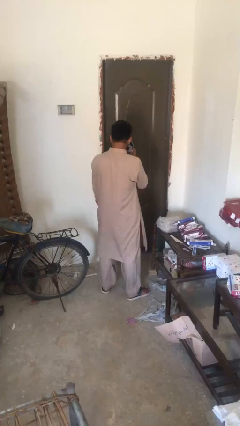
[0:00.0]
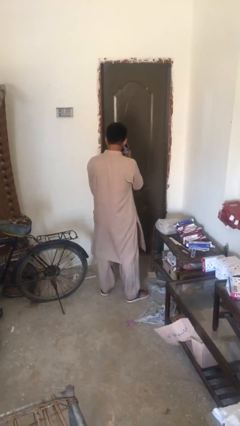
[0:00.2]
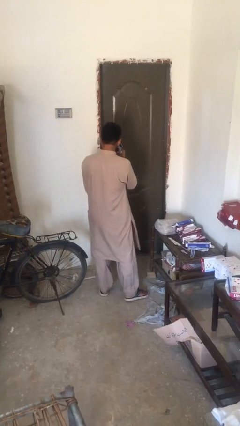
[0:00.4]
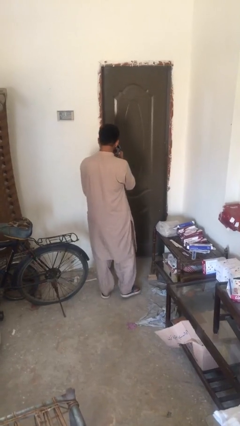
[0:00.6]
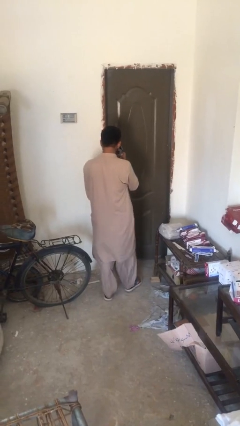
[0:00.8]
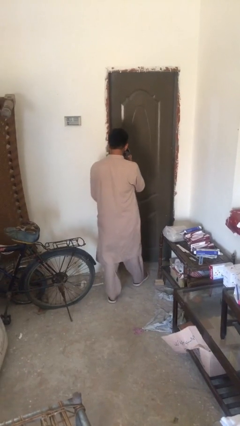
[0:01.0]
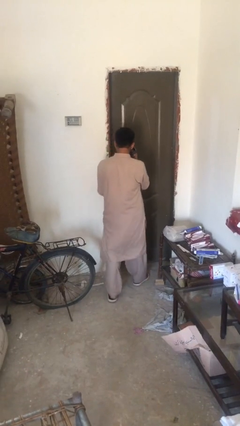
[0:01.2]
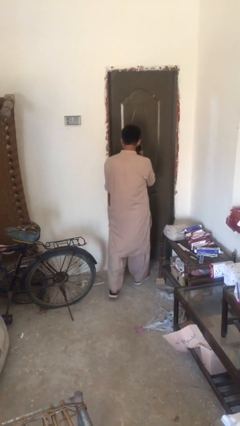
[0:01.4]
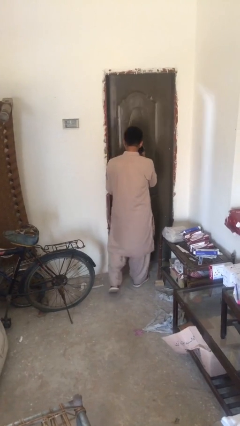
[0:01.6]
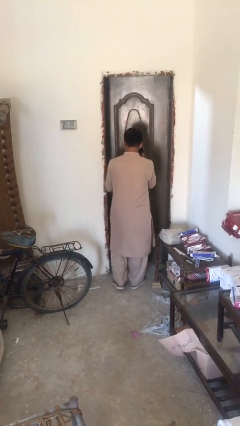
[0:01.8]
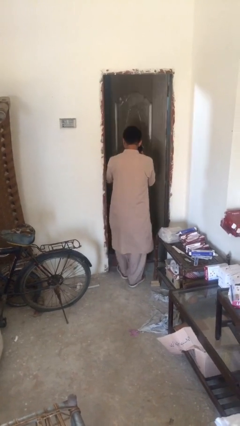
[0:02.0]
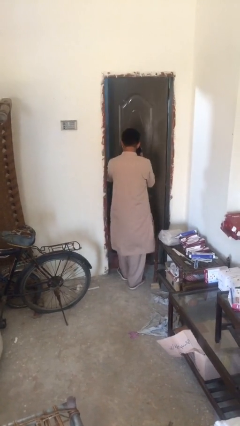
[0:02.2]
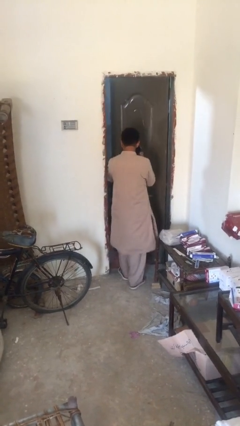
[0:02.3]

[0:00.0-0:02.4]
person opens facility door

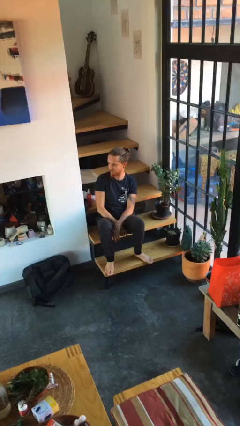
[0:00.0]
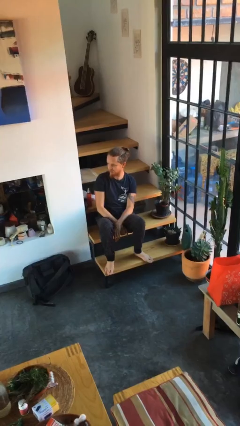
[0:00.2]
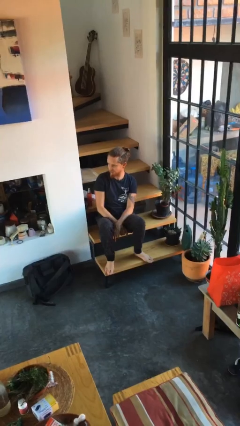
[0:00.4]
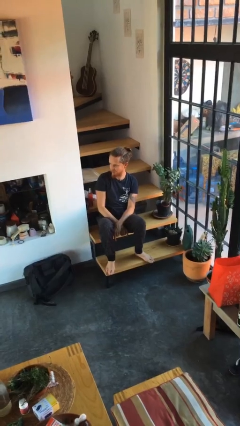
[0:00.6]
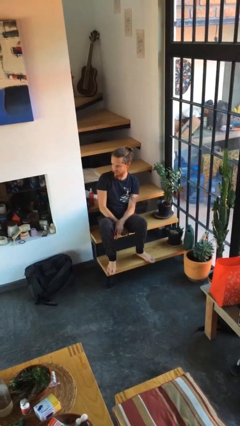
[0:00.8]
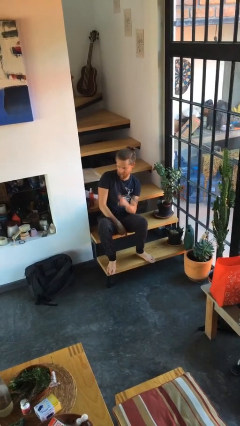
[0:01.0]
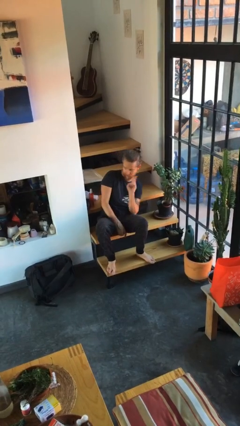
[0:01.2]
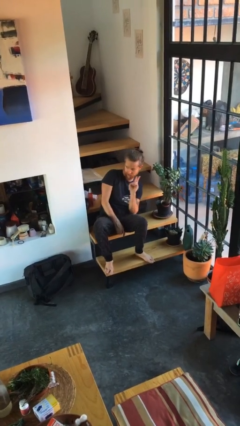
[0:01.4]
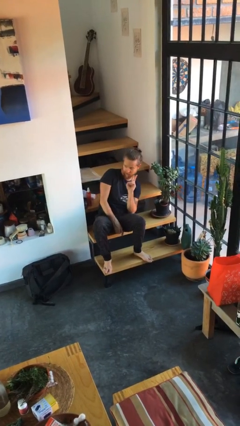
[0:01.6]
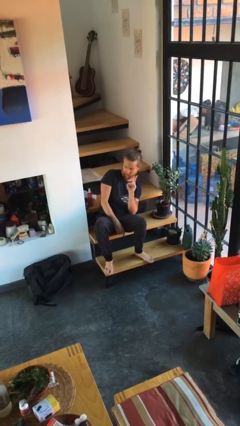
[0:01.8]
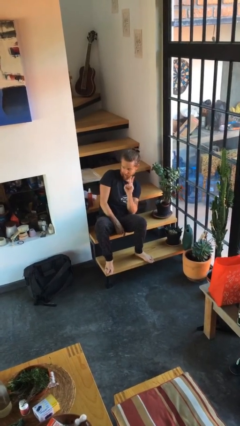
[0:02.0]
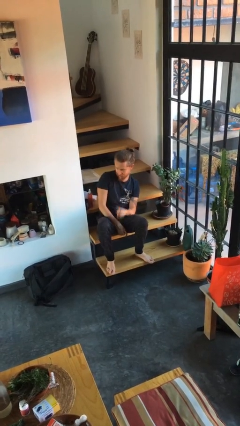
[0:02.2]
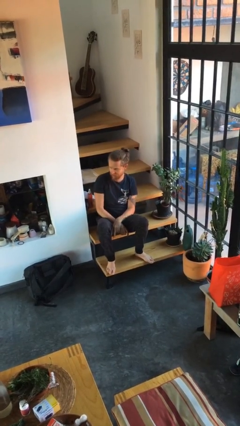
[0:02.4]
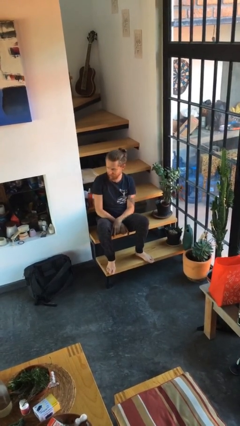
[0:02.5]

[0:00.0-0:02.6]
person gestures peace

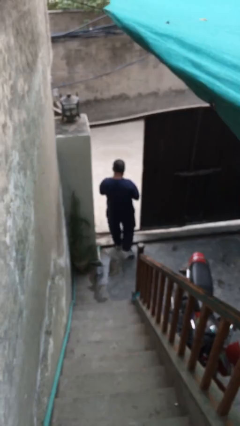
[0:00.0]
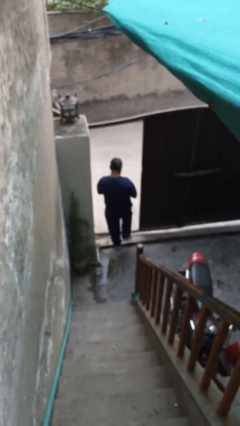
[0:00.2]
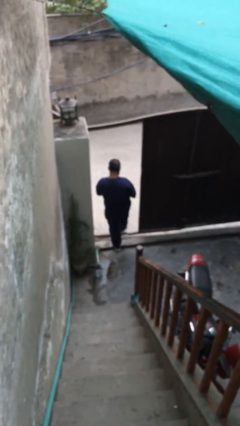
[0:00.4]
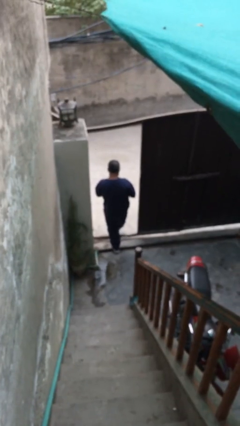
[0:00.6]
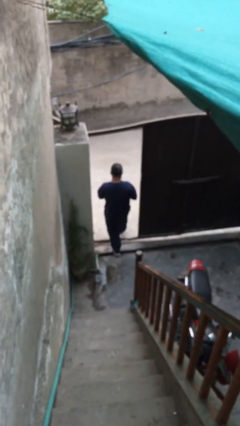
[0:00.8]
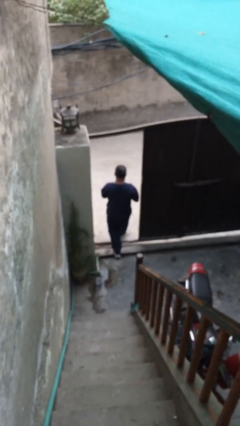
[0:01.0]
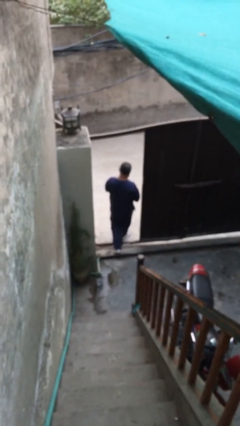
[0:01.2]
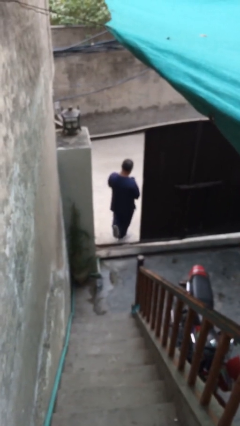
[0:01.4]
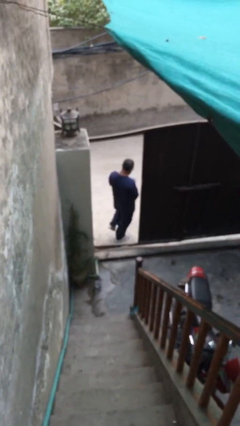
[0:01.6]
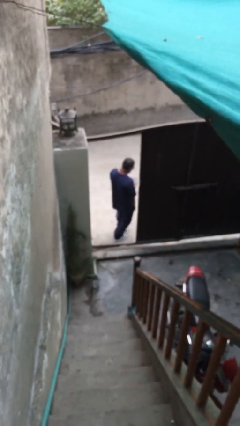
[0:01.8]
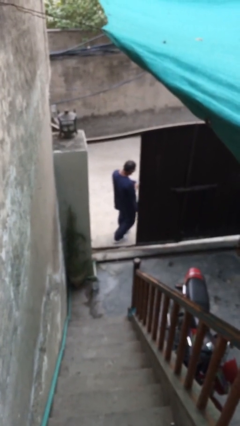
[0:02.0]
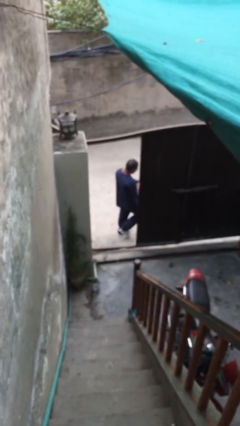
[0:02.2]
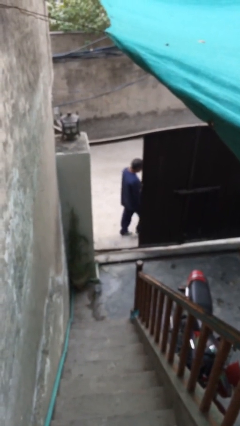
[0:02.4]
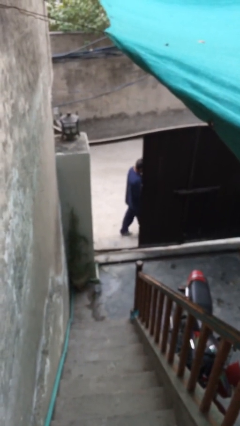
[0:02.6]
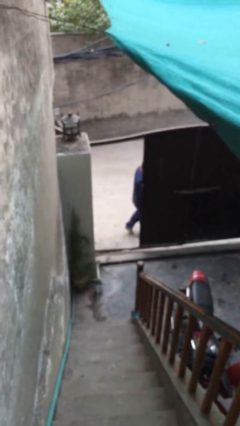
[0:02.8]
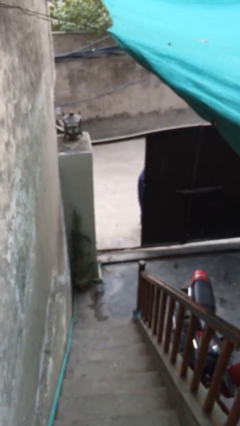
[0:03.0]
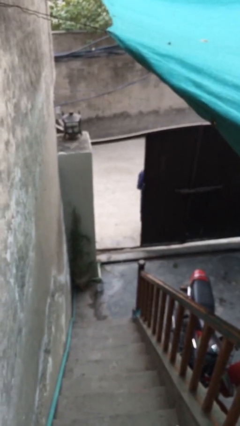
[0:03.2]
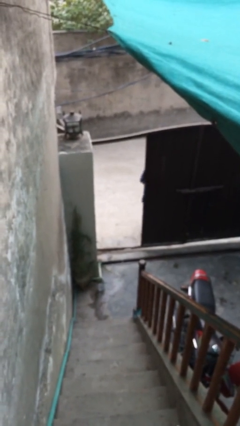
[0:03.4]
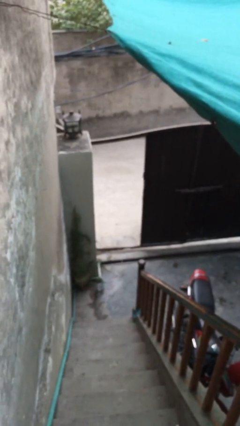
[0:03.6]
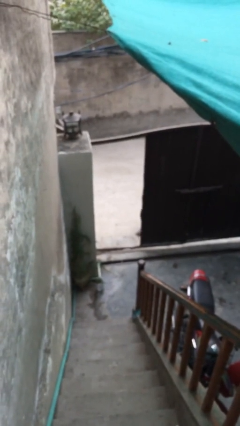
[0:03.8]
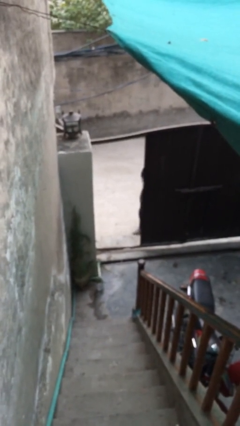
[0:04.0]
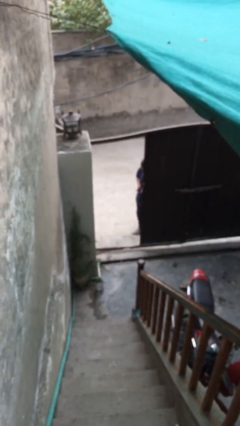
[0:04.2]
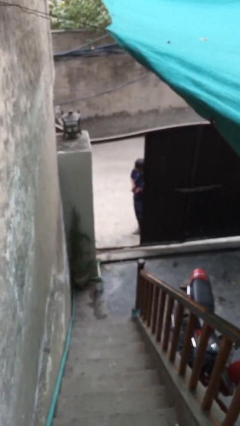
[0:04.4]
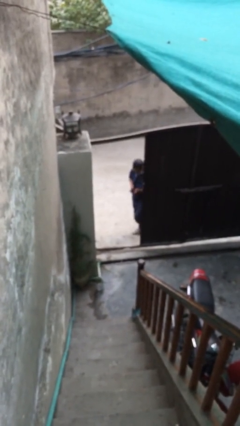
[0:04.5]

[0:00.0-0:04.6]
person exits scene through structure

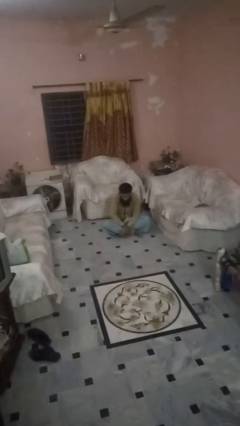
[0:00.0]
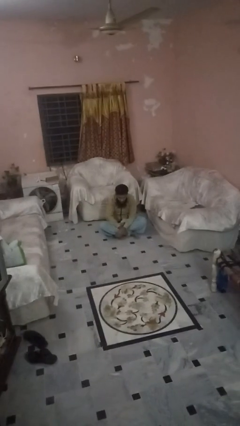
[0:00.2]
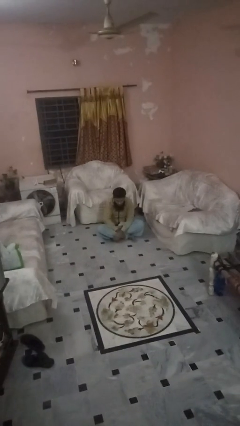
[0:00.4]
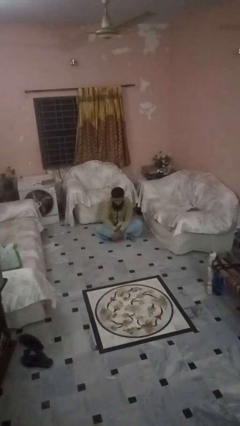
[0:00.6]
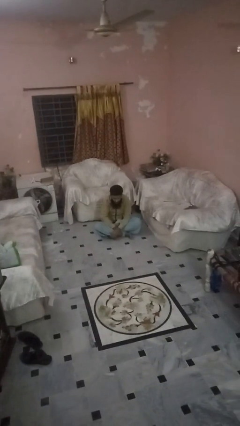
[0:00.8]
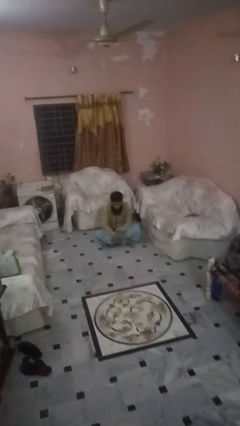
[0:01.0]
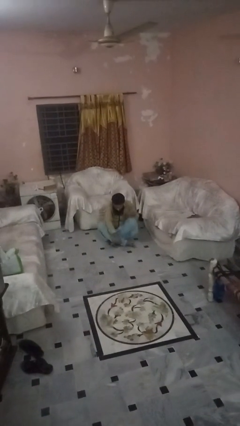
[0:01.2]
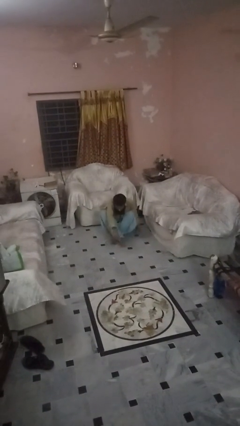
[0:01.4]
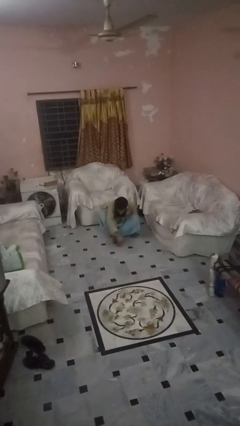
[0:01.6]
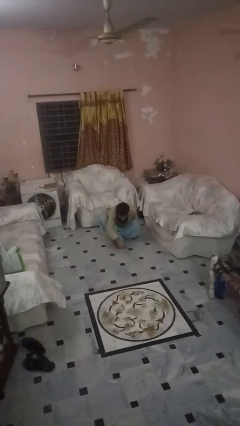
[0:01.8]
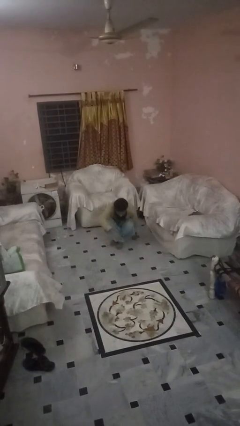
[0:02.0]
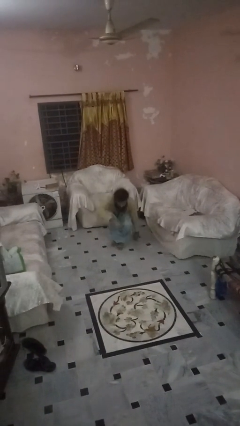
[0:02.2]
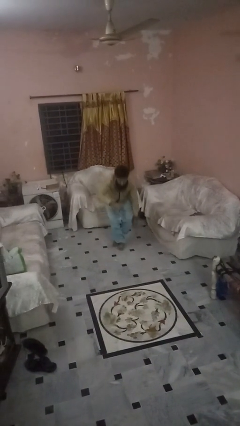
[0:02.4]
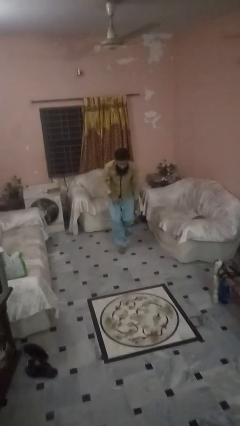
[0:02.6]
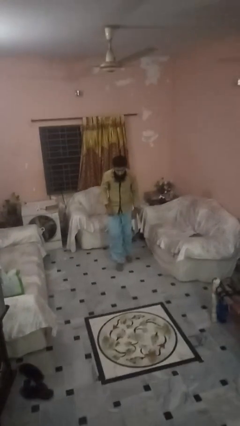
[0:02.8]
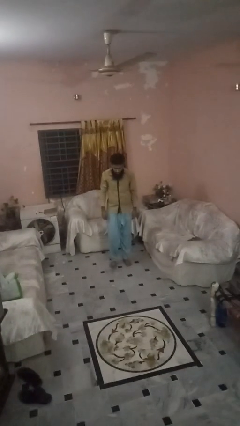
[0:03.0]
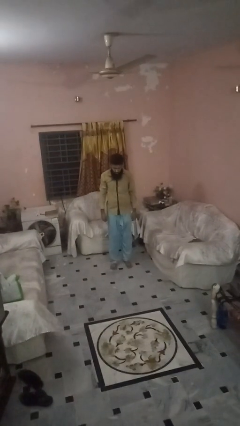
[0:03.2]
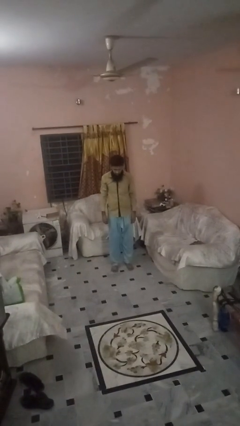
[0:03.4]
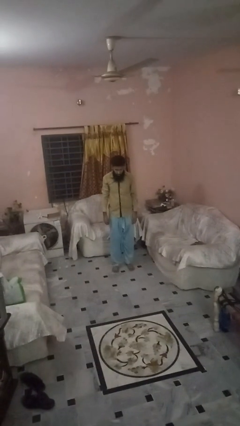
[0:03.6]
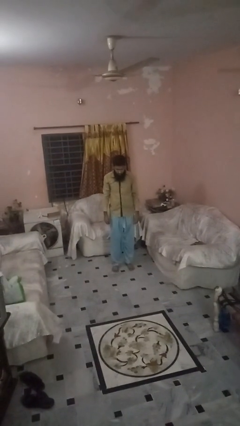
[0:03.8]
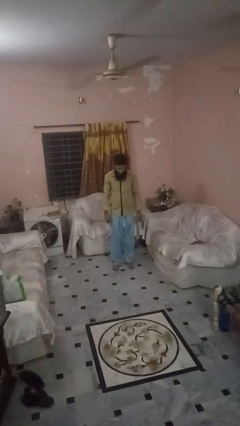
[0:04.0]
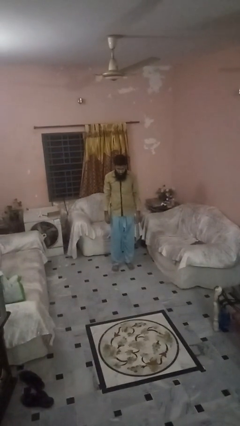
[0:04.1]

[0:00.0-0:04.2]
person stands up from floor

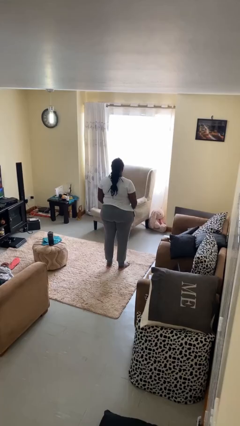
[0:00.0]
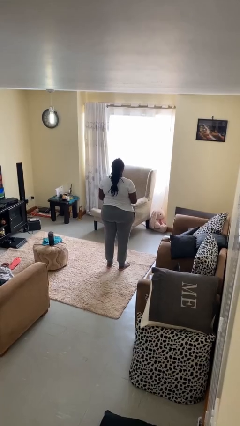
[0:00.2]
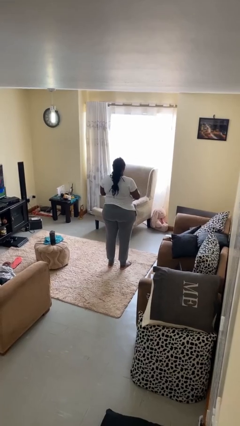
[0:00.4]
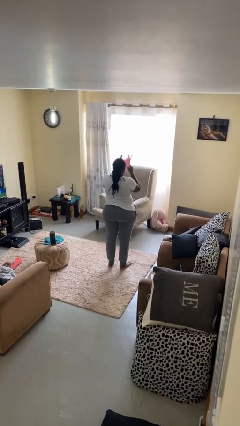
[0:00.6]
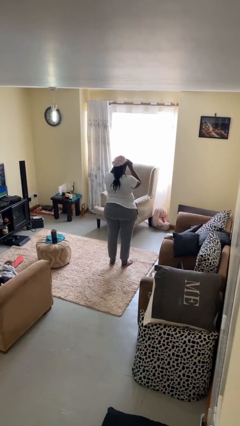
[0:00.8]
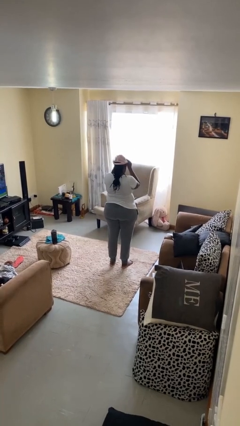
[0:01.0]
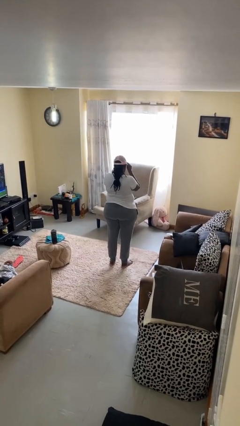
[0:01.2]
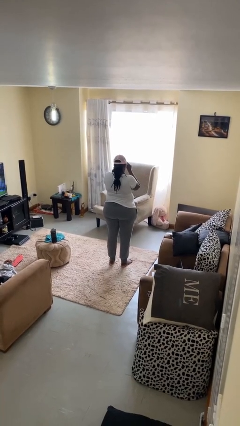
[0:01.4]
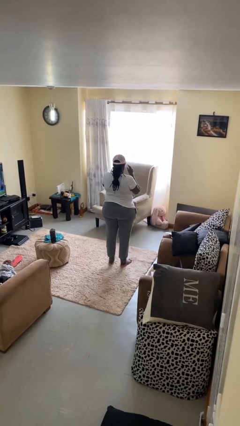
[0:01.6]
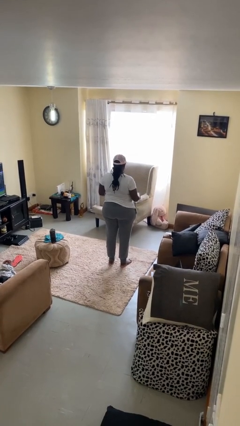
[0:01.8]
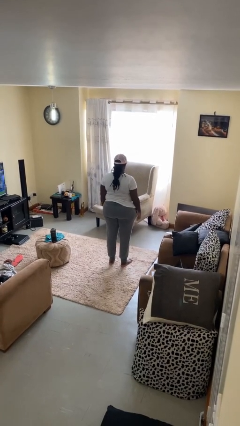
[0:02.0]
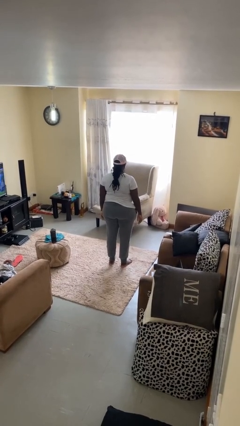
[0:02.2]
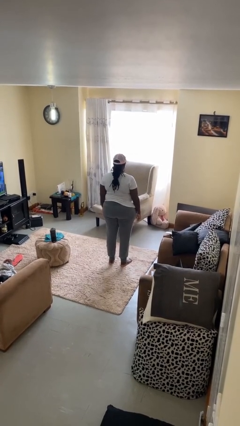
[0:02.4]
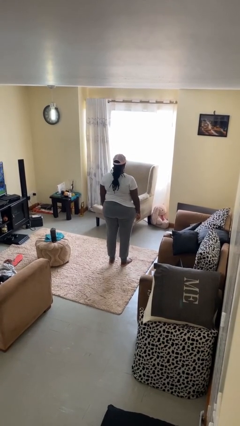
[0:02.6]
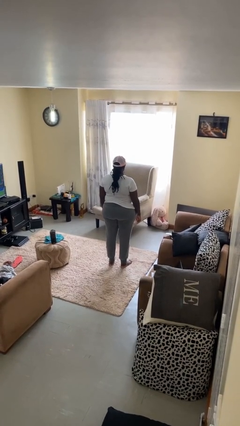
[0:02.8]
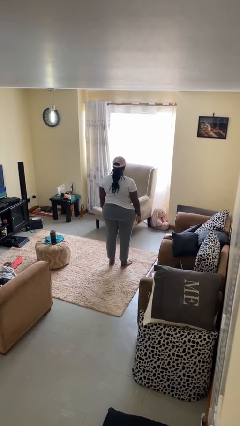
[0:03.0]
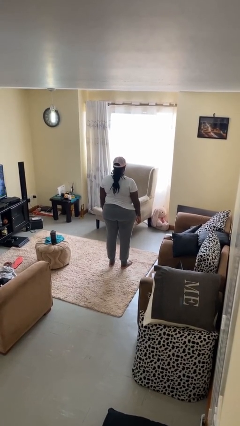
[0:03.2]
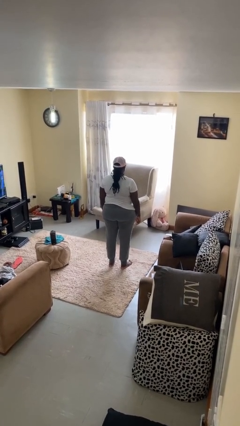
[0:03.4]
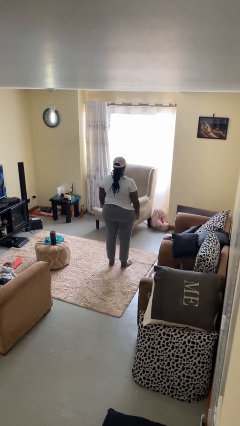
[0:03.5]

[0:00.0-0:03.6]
person puts on hat

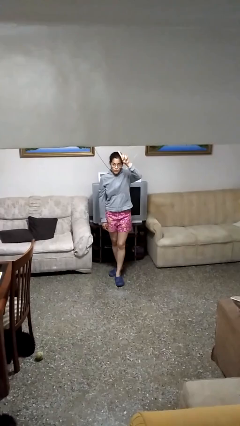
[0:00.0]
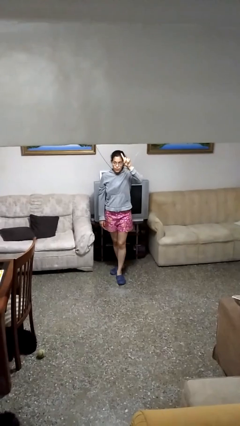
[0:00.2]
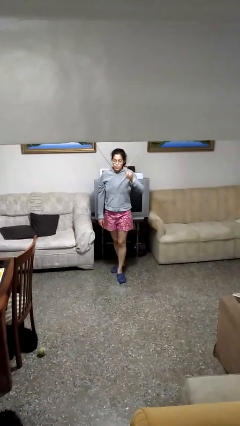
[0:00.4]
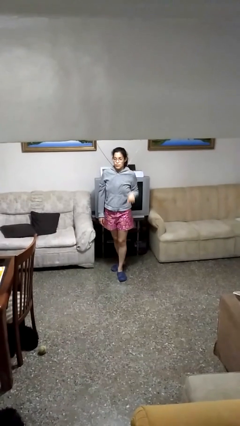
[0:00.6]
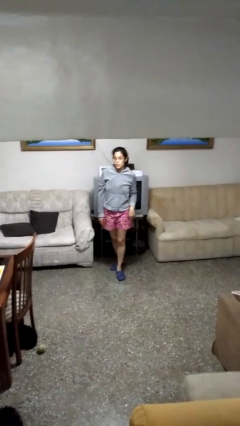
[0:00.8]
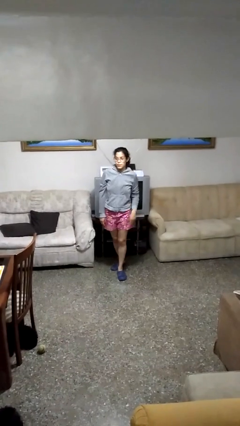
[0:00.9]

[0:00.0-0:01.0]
person gestures lower hand
